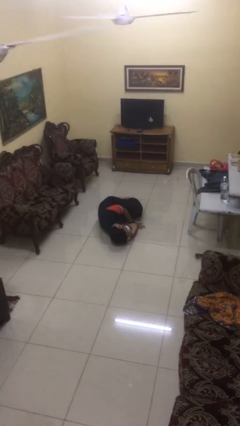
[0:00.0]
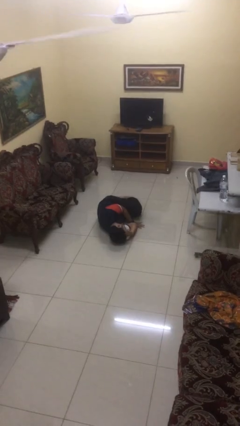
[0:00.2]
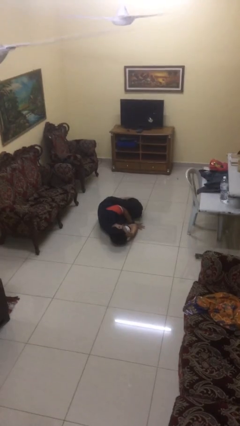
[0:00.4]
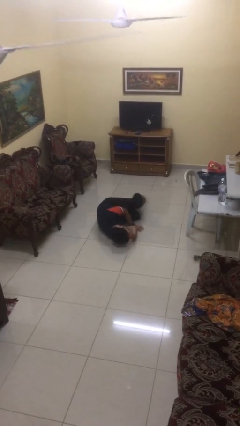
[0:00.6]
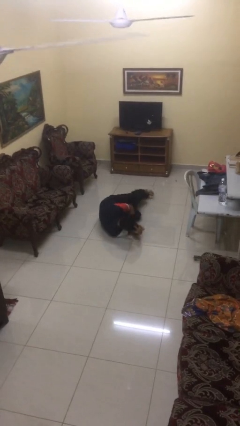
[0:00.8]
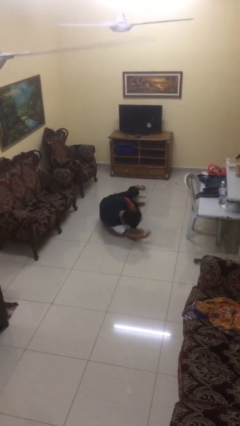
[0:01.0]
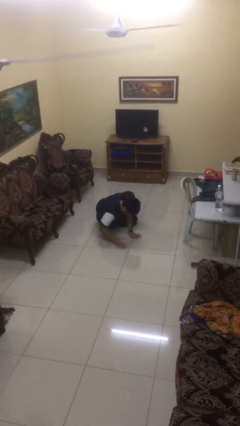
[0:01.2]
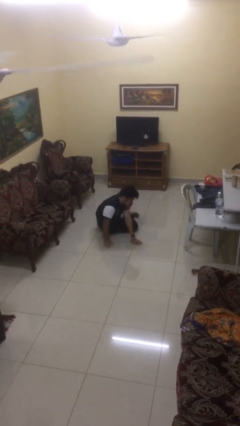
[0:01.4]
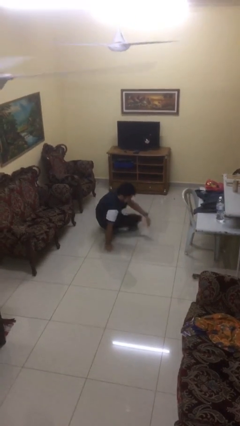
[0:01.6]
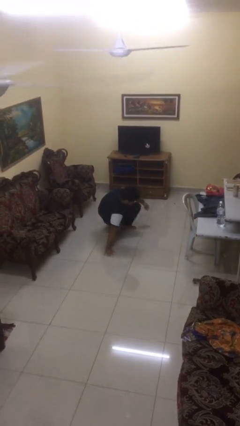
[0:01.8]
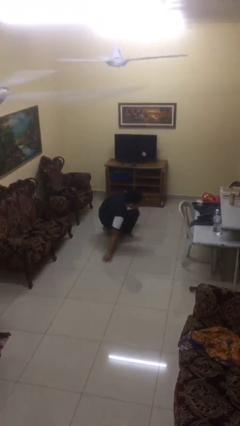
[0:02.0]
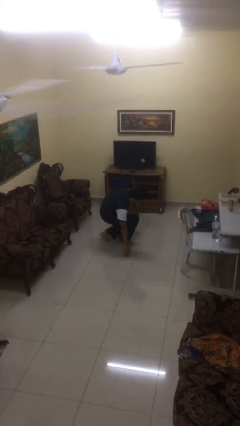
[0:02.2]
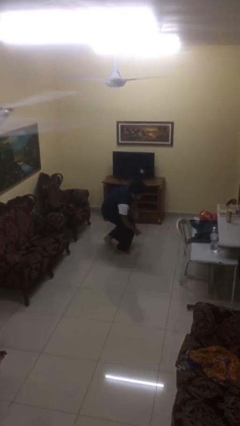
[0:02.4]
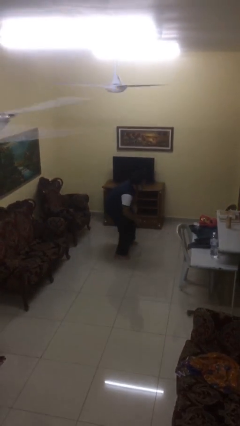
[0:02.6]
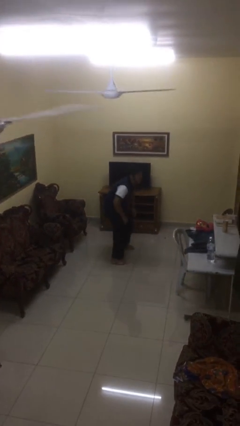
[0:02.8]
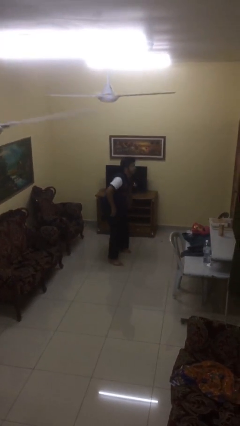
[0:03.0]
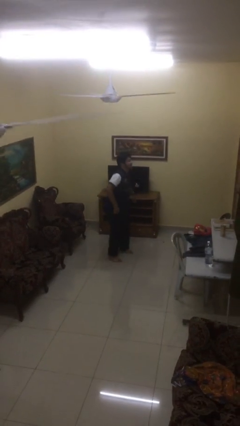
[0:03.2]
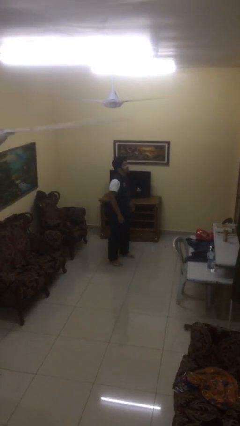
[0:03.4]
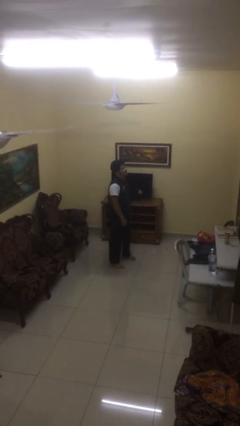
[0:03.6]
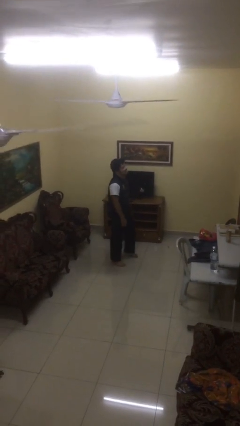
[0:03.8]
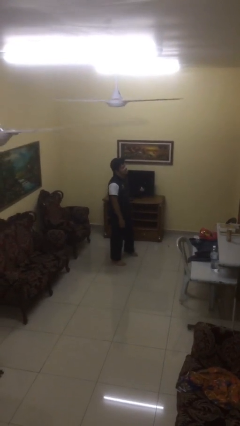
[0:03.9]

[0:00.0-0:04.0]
person stands up from floor

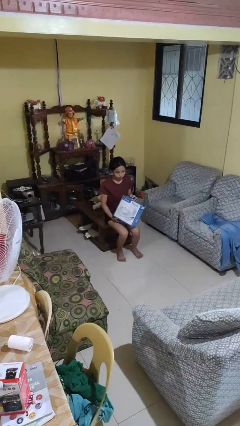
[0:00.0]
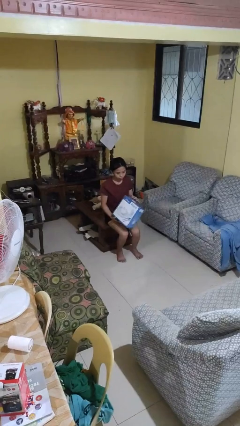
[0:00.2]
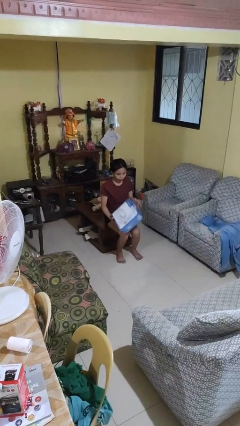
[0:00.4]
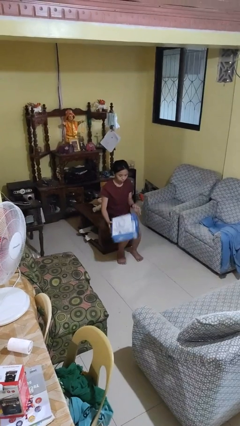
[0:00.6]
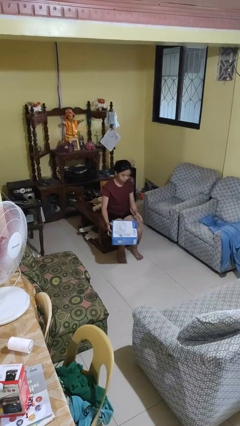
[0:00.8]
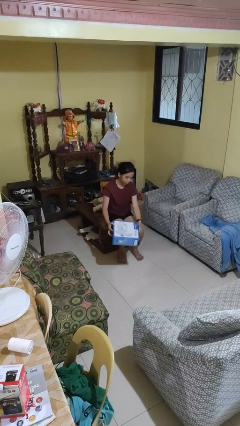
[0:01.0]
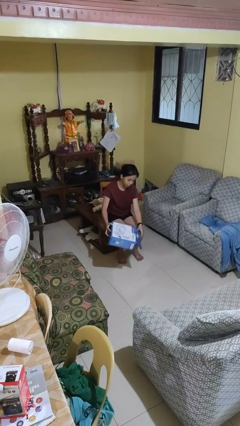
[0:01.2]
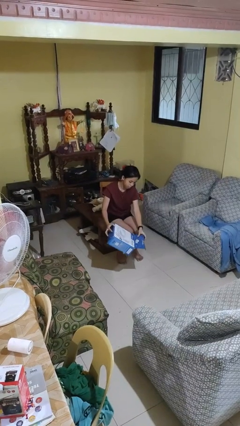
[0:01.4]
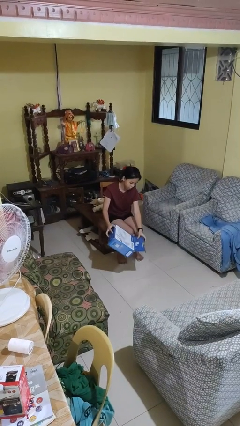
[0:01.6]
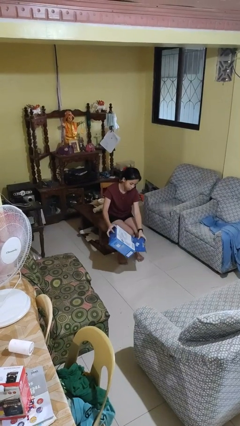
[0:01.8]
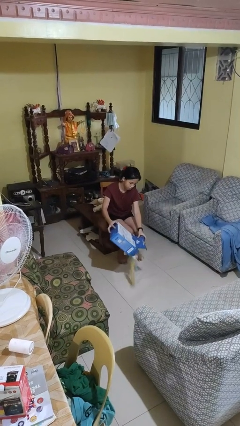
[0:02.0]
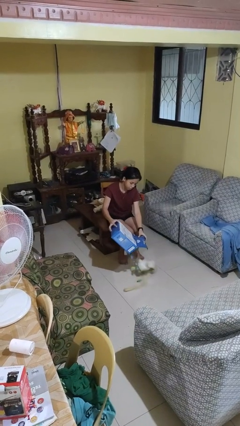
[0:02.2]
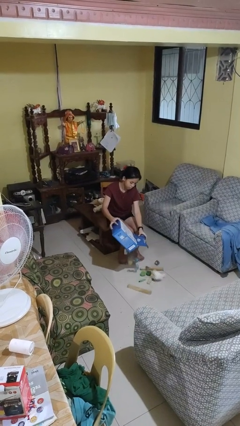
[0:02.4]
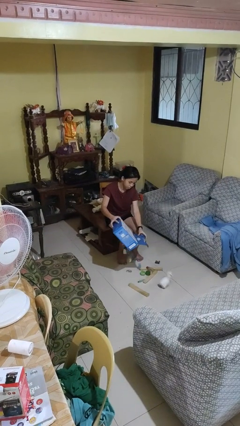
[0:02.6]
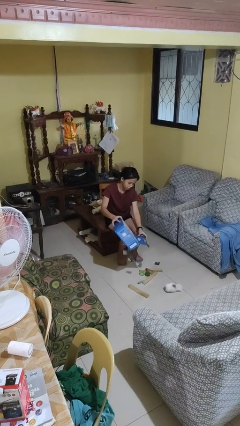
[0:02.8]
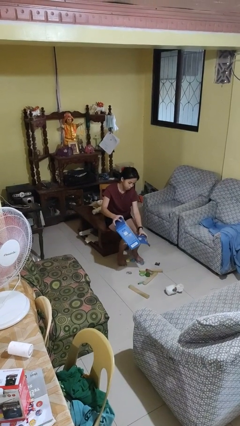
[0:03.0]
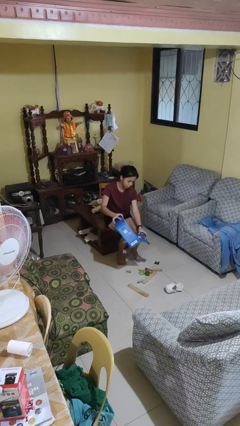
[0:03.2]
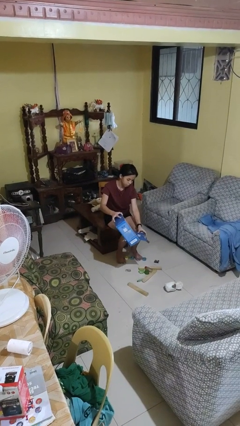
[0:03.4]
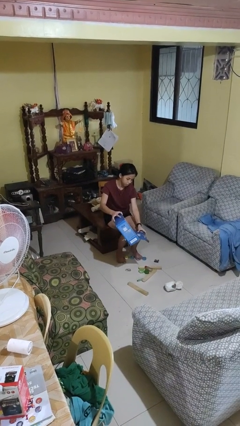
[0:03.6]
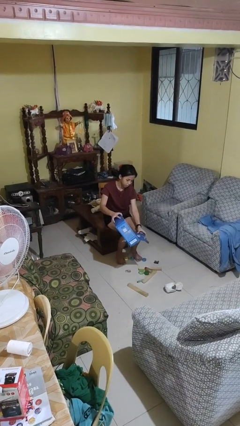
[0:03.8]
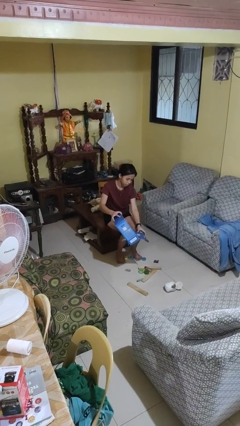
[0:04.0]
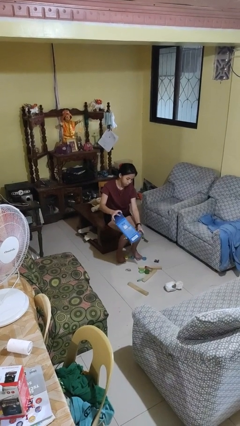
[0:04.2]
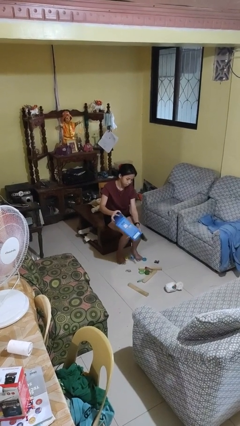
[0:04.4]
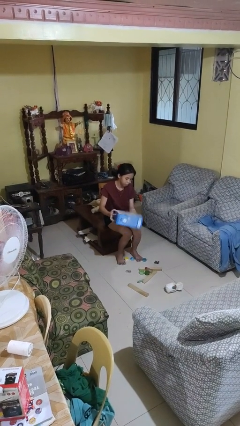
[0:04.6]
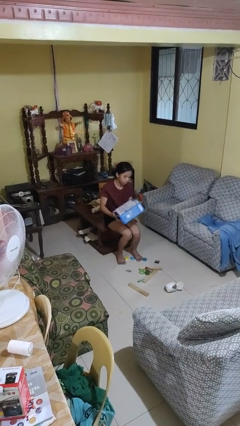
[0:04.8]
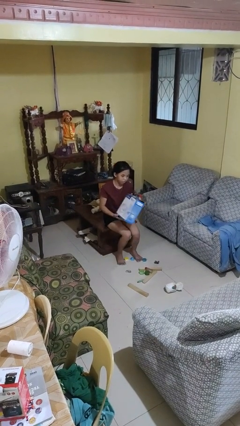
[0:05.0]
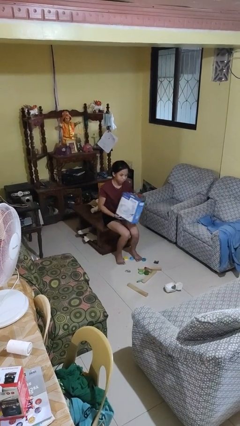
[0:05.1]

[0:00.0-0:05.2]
person unloads box onto floor

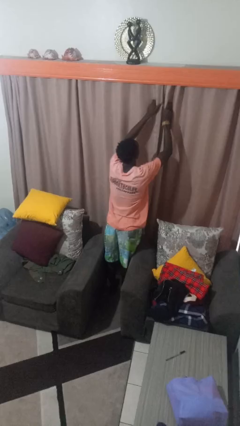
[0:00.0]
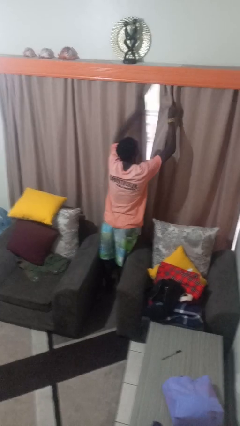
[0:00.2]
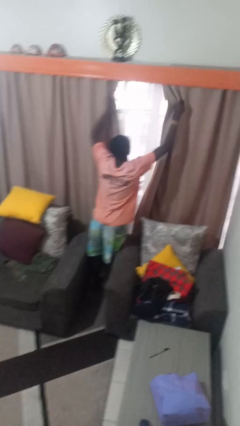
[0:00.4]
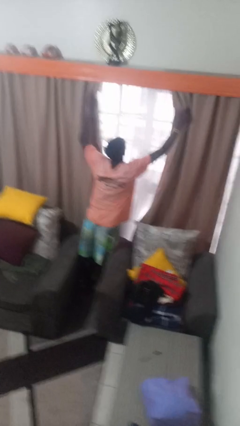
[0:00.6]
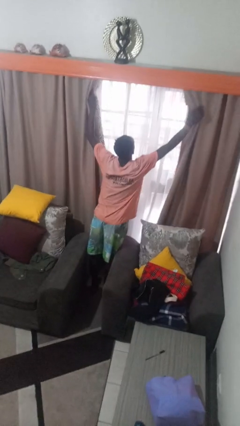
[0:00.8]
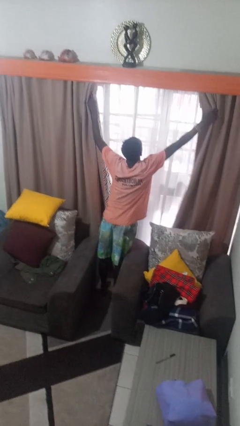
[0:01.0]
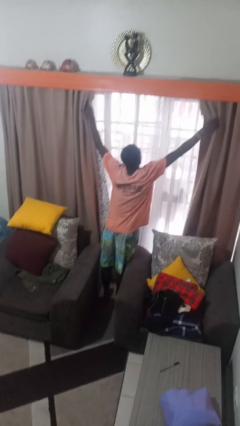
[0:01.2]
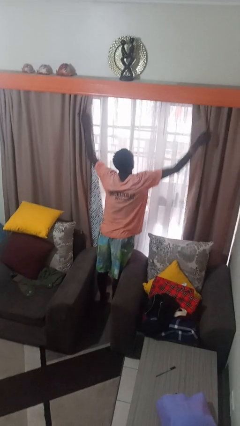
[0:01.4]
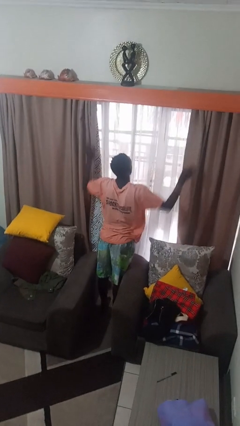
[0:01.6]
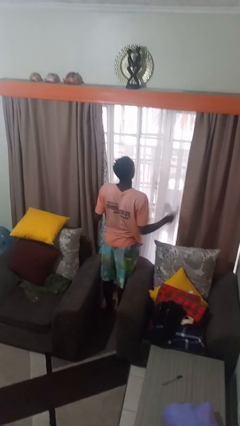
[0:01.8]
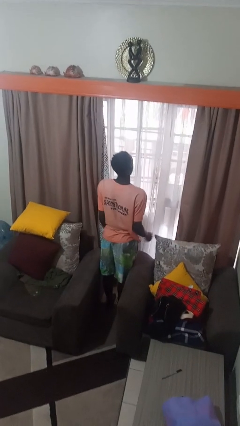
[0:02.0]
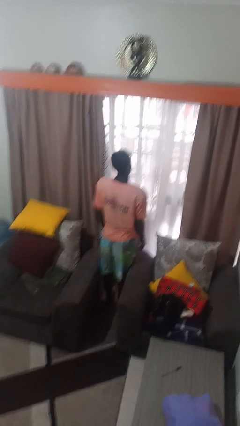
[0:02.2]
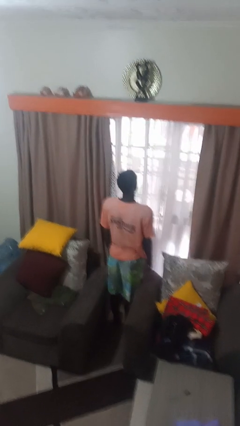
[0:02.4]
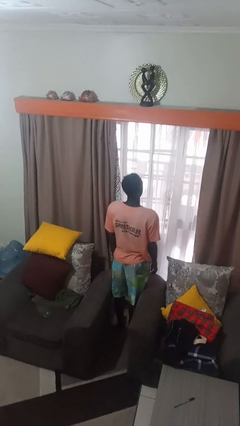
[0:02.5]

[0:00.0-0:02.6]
person opens curtains

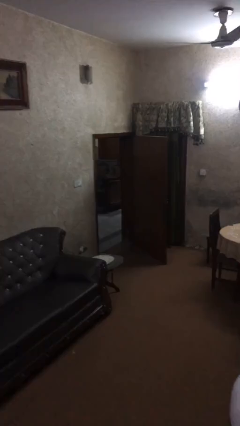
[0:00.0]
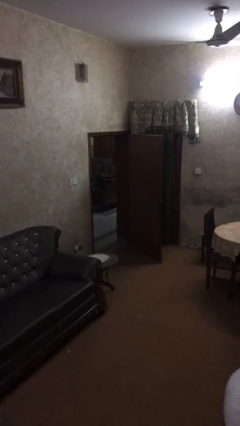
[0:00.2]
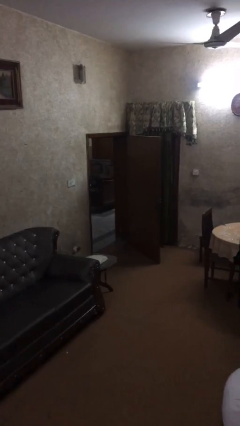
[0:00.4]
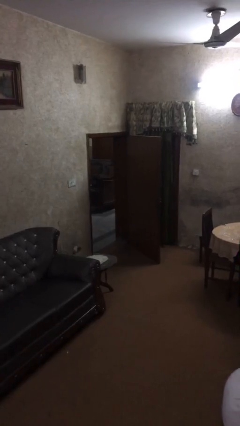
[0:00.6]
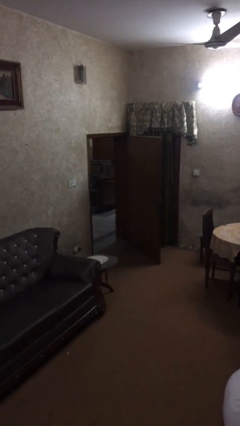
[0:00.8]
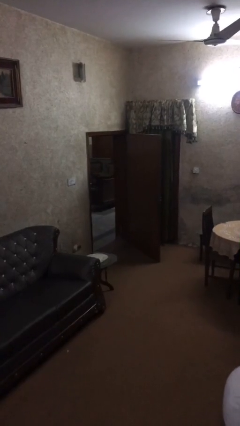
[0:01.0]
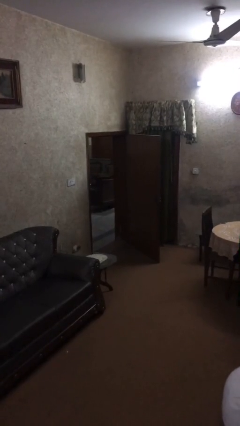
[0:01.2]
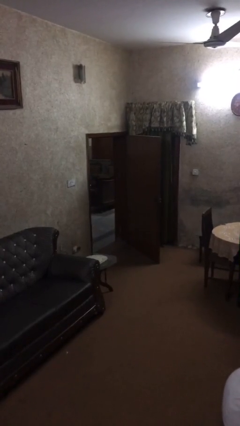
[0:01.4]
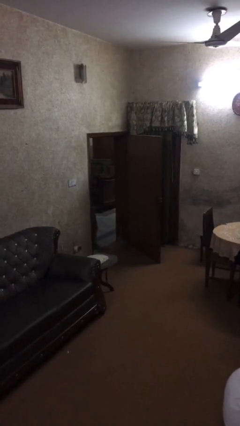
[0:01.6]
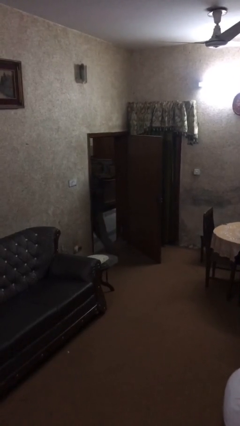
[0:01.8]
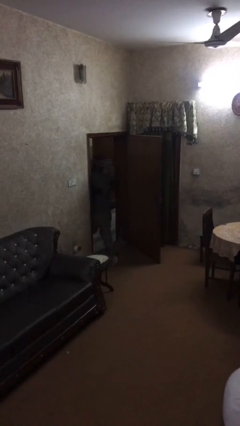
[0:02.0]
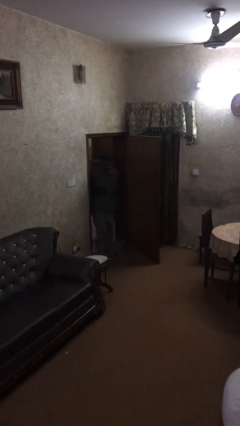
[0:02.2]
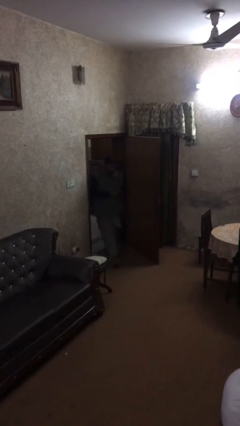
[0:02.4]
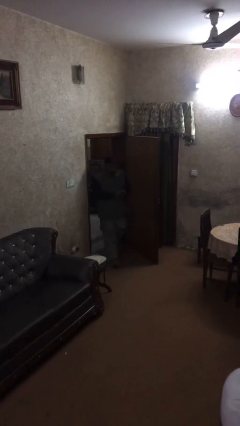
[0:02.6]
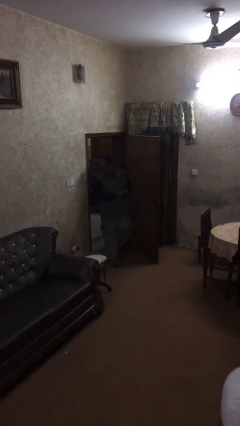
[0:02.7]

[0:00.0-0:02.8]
person enters scene through structure

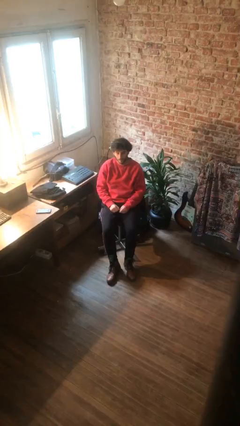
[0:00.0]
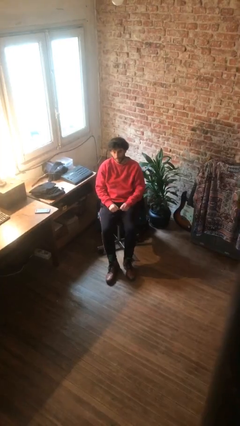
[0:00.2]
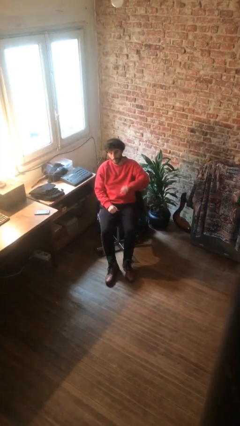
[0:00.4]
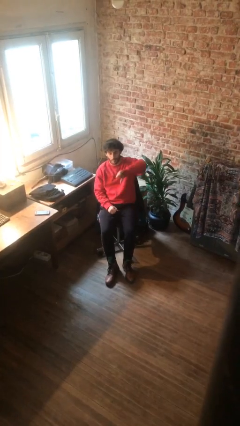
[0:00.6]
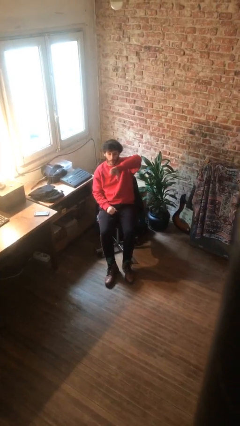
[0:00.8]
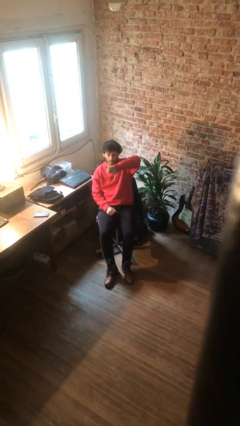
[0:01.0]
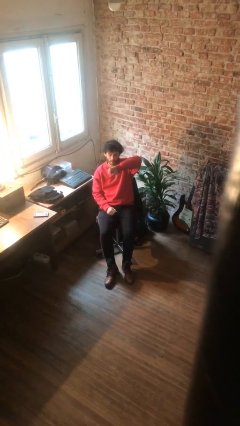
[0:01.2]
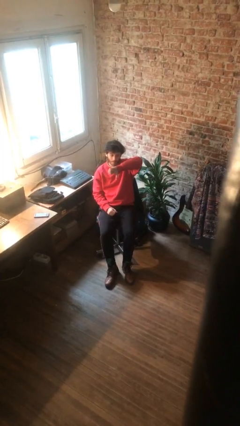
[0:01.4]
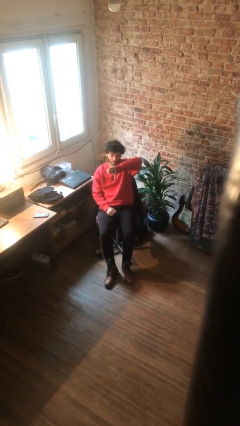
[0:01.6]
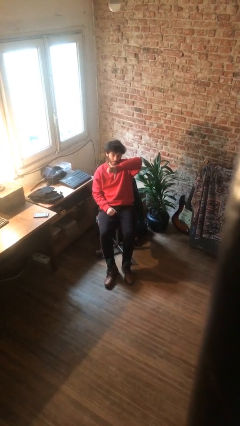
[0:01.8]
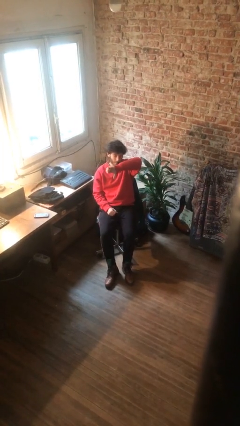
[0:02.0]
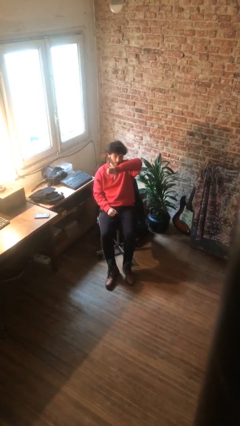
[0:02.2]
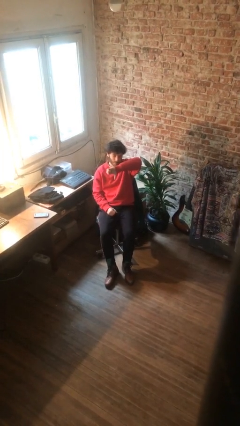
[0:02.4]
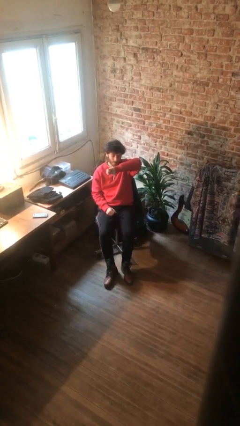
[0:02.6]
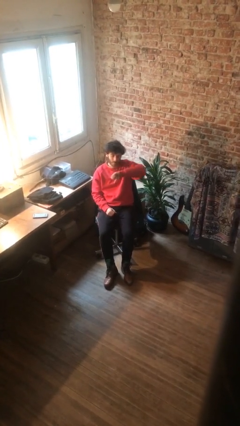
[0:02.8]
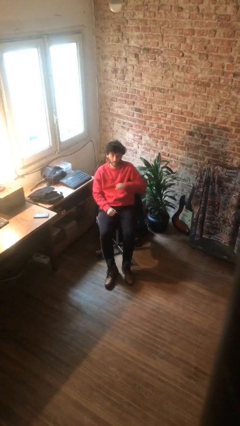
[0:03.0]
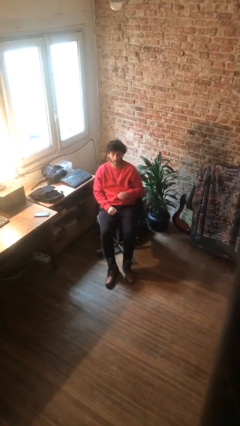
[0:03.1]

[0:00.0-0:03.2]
person gestures thumbs down
